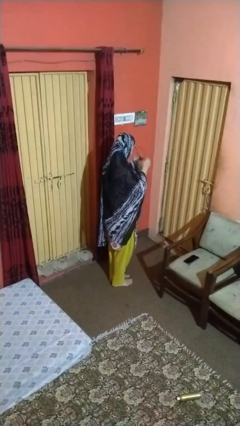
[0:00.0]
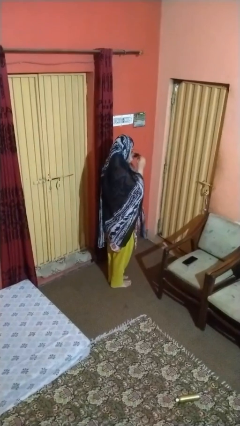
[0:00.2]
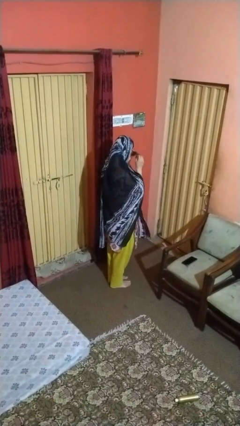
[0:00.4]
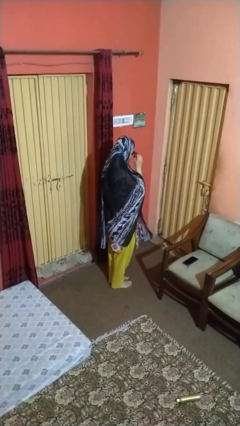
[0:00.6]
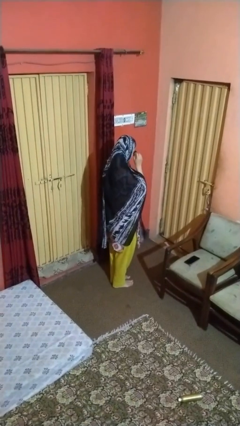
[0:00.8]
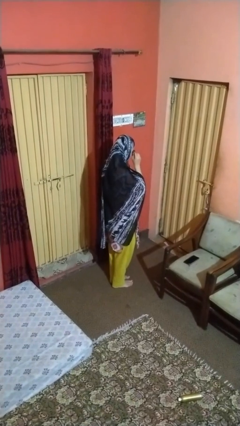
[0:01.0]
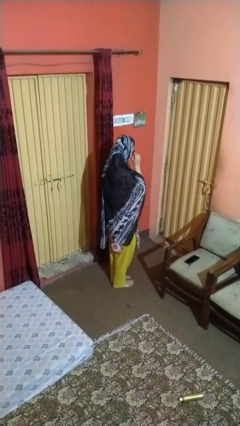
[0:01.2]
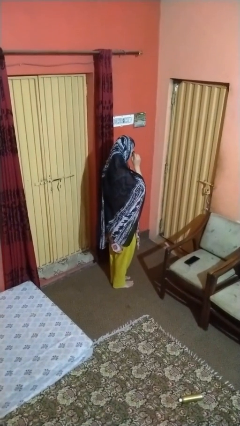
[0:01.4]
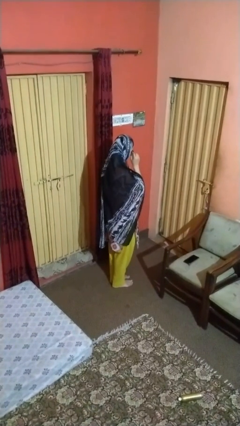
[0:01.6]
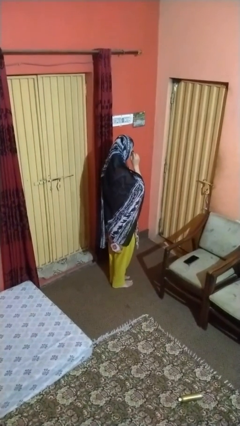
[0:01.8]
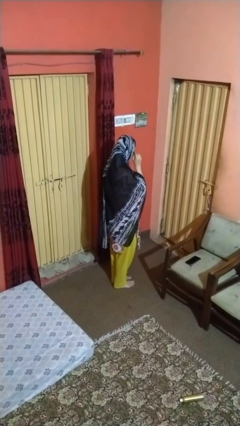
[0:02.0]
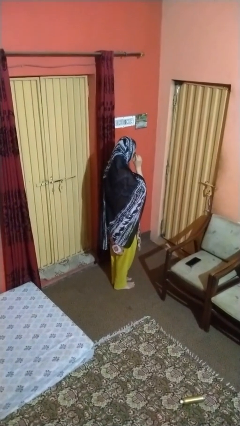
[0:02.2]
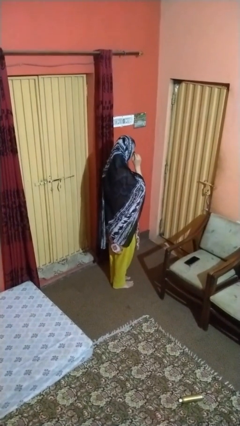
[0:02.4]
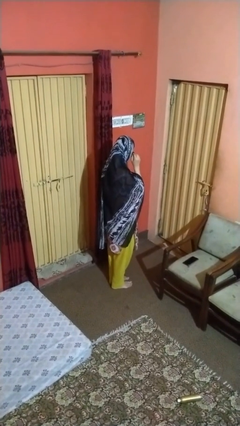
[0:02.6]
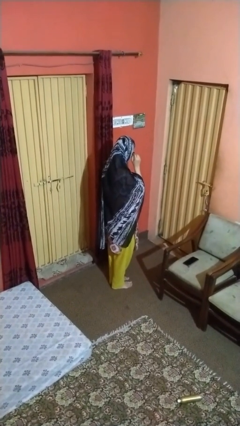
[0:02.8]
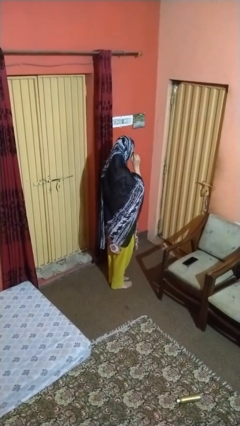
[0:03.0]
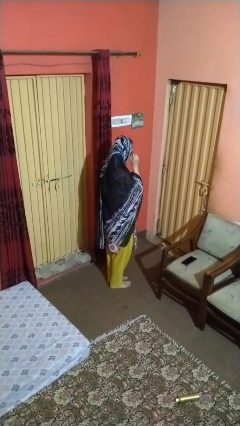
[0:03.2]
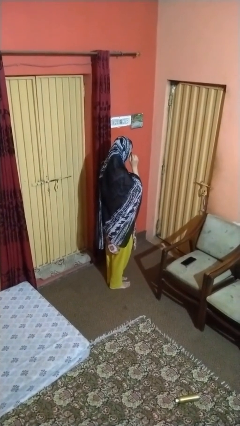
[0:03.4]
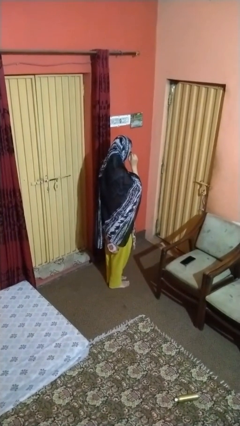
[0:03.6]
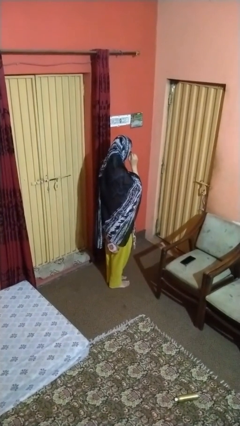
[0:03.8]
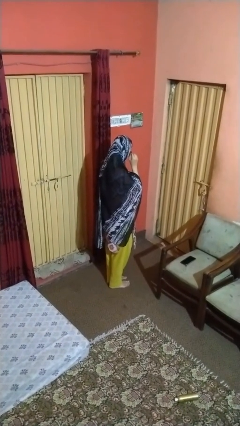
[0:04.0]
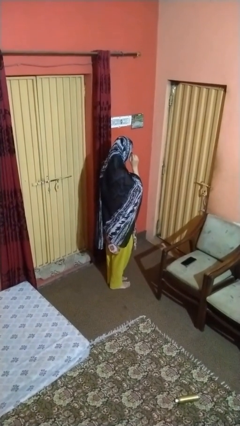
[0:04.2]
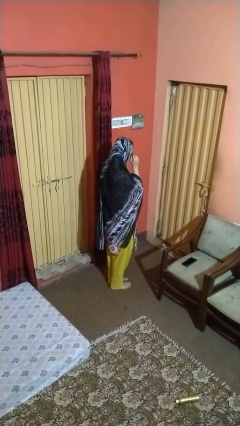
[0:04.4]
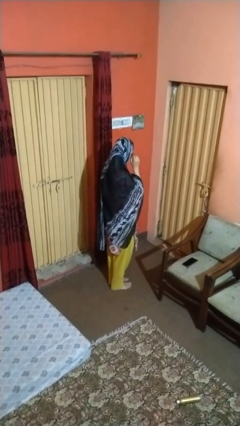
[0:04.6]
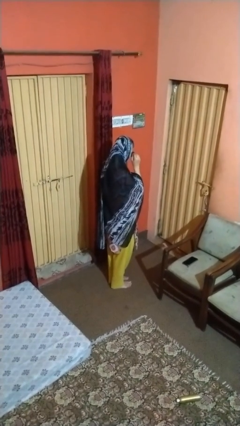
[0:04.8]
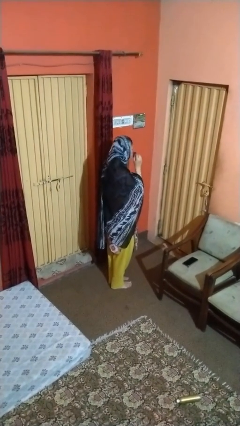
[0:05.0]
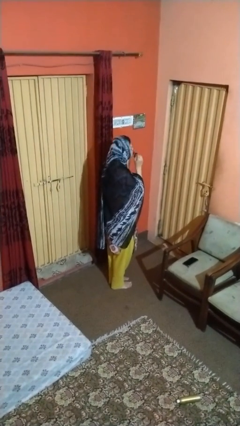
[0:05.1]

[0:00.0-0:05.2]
person puts on sunglasses

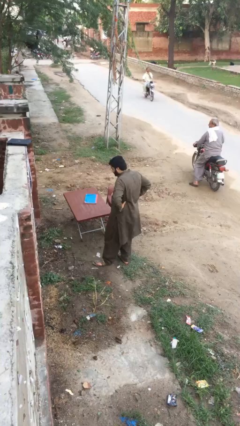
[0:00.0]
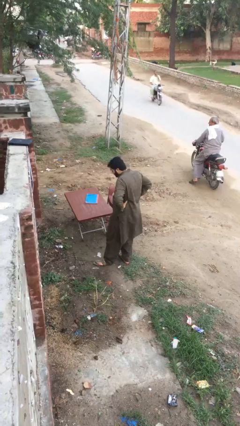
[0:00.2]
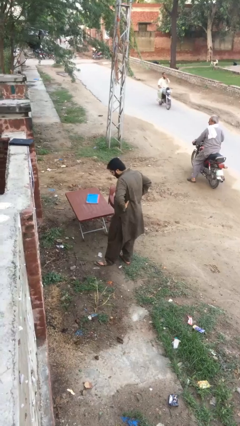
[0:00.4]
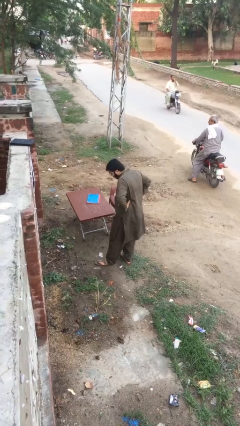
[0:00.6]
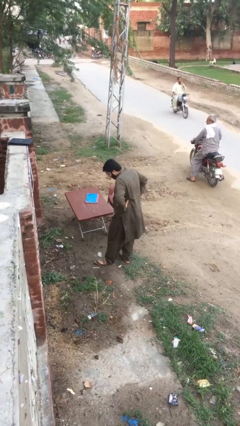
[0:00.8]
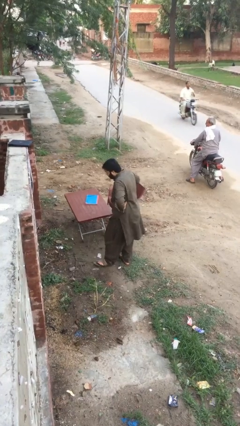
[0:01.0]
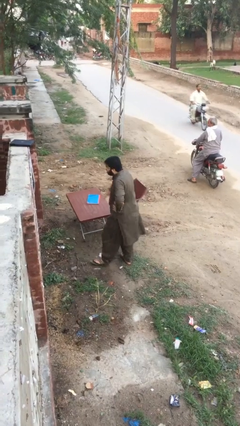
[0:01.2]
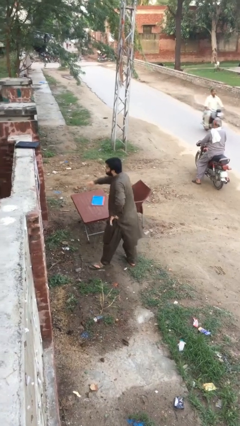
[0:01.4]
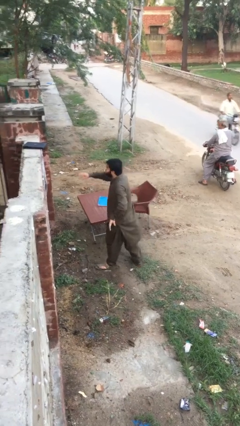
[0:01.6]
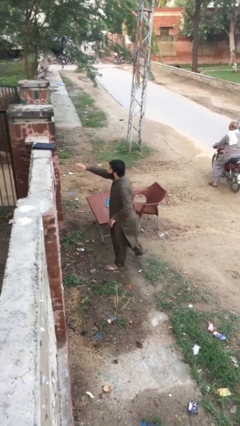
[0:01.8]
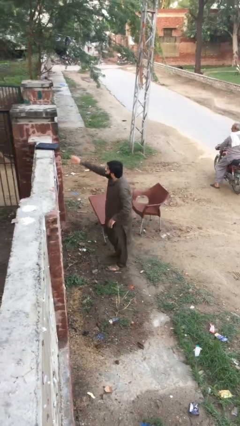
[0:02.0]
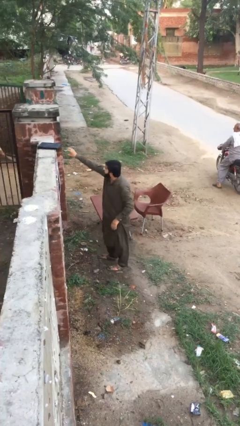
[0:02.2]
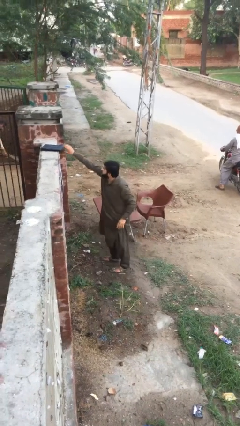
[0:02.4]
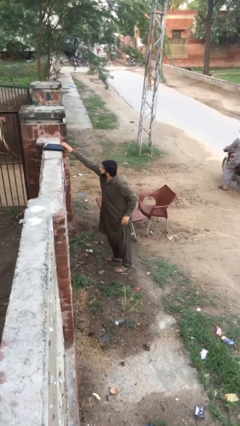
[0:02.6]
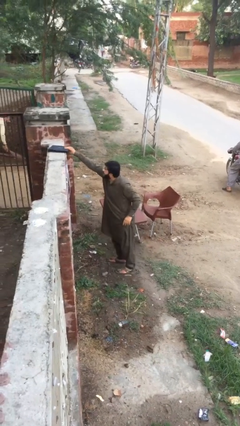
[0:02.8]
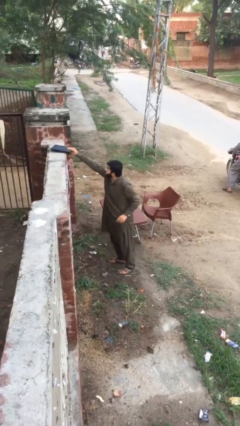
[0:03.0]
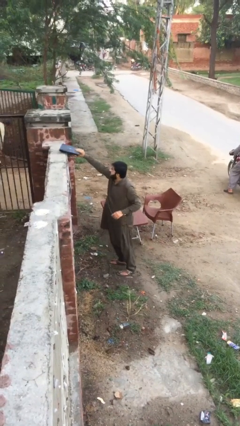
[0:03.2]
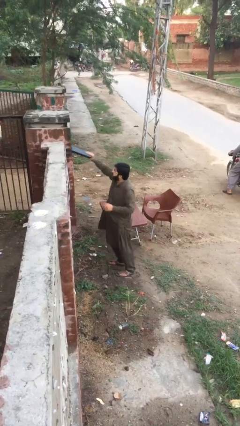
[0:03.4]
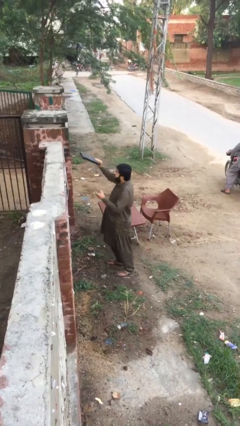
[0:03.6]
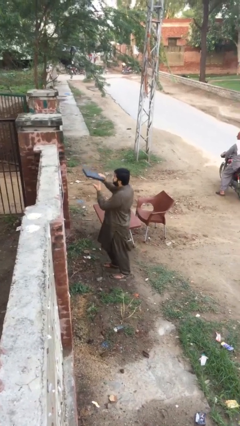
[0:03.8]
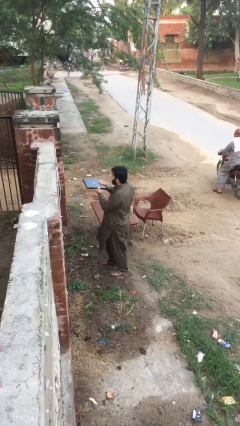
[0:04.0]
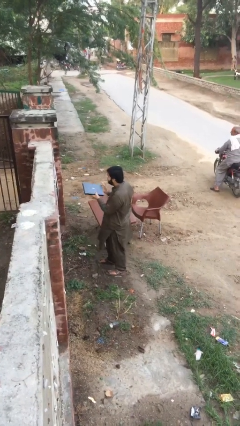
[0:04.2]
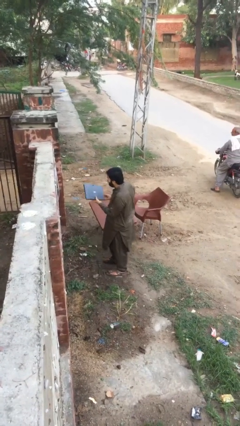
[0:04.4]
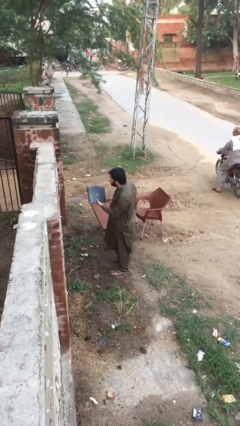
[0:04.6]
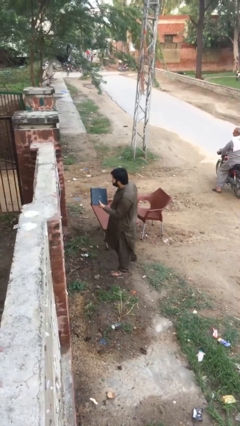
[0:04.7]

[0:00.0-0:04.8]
person picks up object from shelf

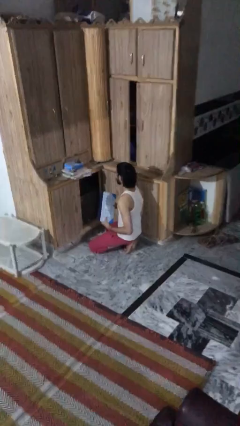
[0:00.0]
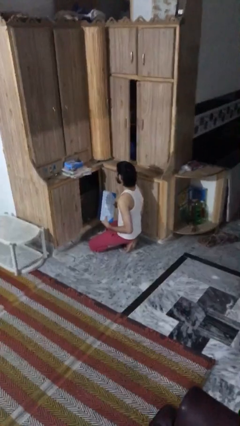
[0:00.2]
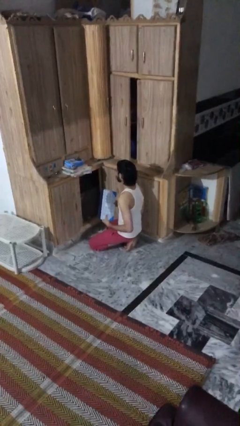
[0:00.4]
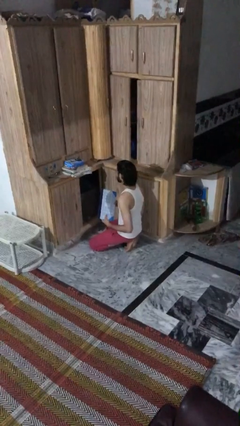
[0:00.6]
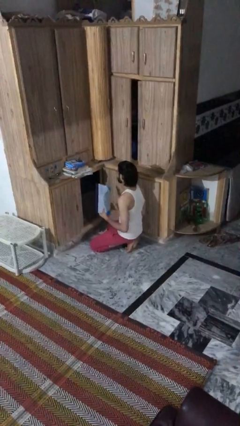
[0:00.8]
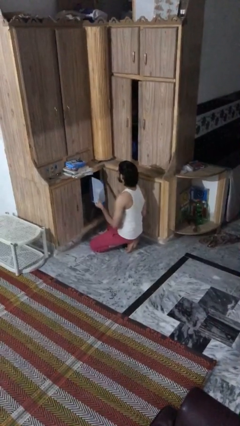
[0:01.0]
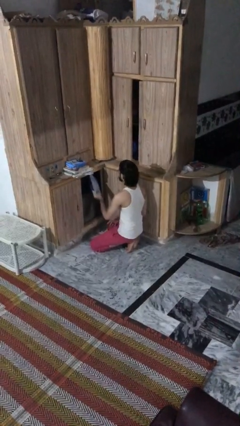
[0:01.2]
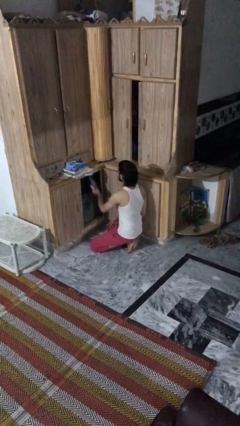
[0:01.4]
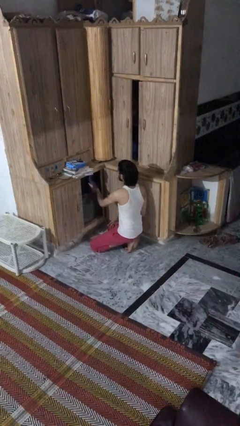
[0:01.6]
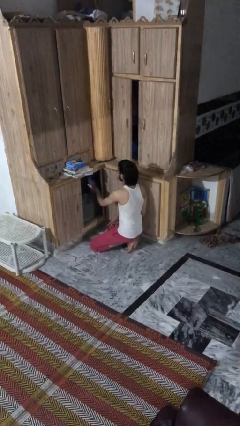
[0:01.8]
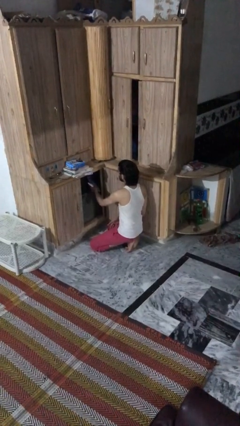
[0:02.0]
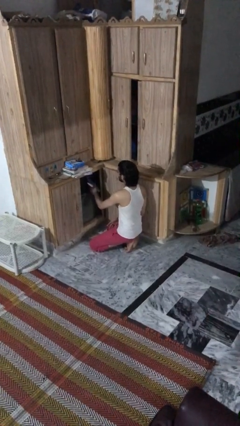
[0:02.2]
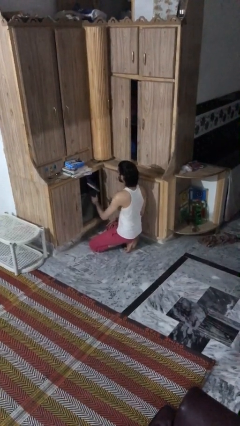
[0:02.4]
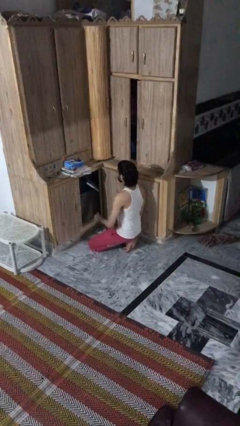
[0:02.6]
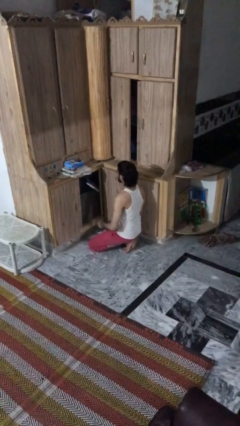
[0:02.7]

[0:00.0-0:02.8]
person puts down object into cabinet

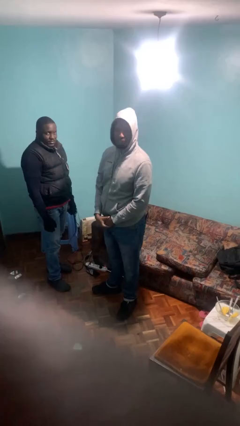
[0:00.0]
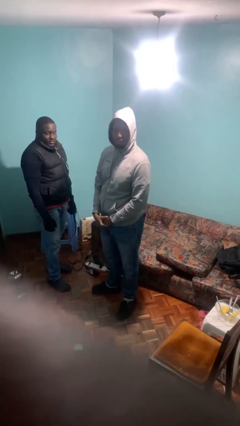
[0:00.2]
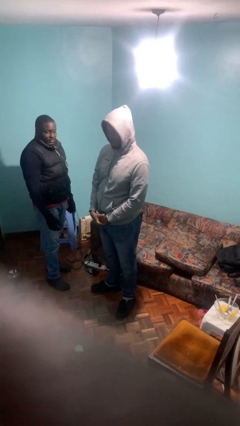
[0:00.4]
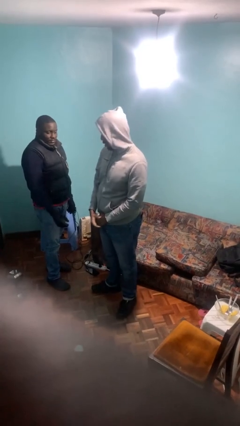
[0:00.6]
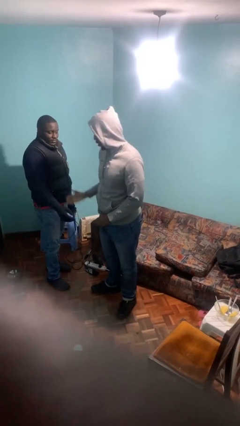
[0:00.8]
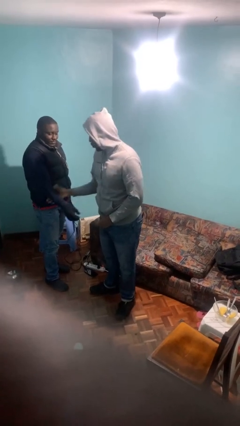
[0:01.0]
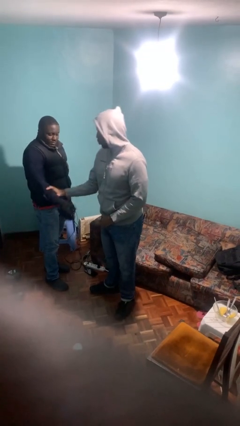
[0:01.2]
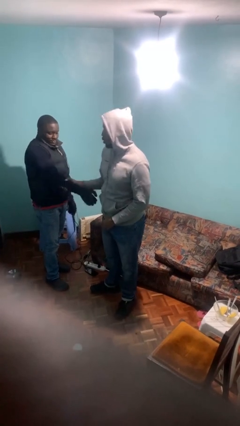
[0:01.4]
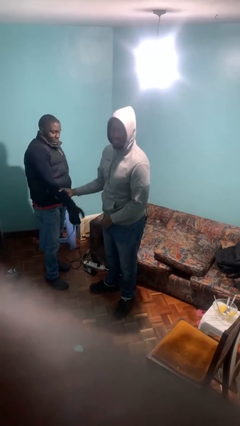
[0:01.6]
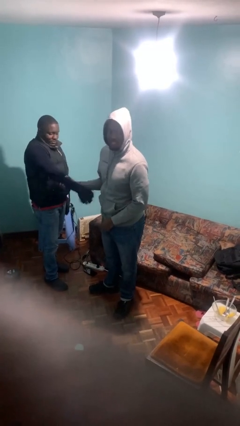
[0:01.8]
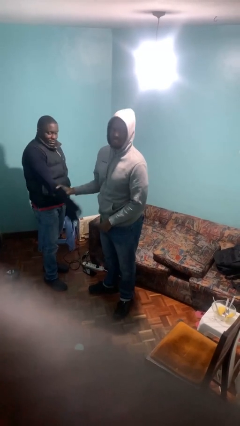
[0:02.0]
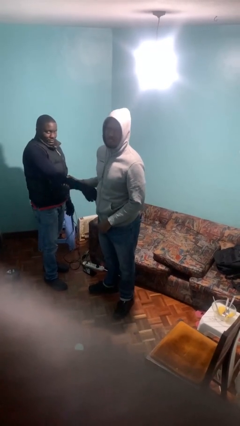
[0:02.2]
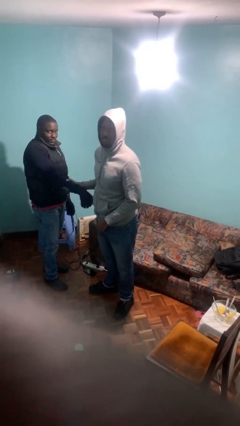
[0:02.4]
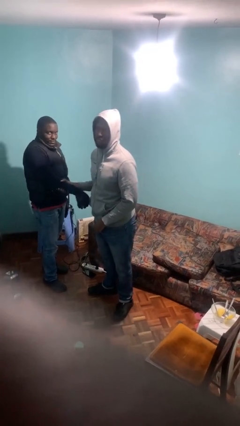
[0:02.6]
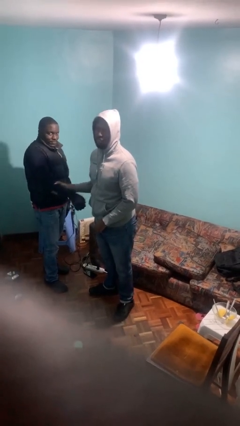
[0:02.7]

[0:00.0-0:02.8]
person grabs person by forearm

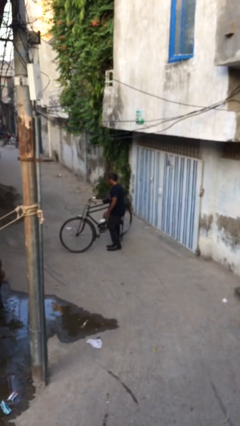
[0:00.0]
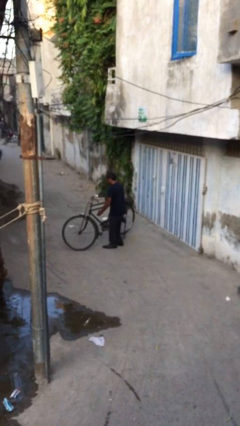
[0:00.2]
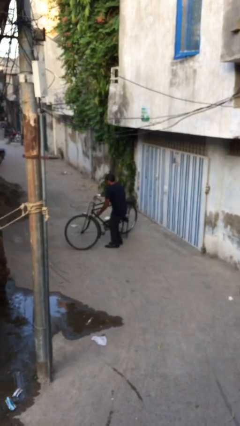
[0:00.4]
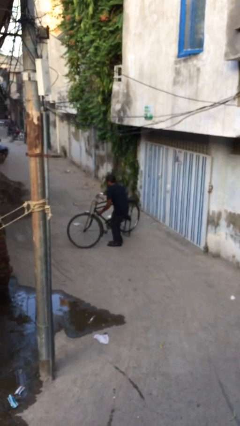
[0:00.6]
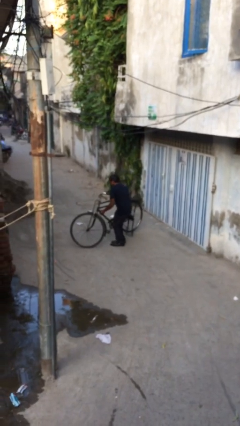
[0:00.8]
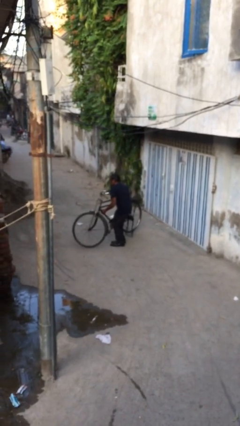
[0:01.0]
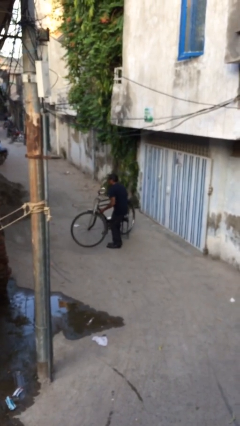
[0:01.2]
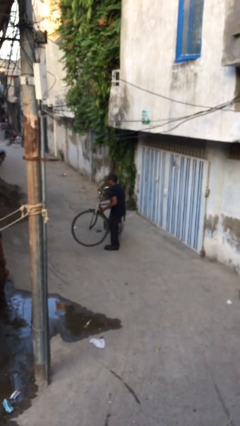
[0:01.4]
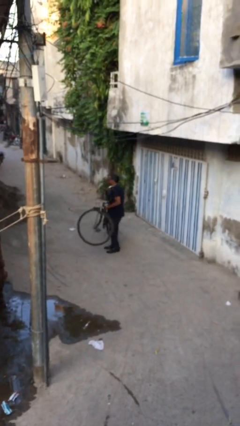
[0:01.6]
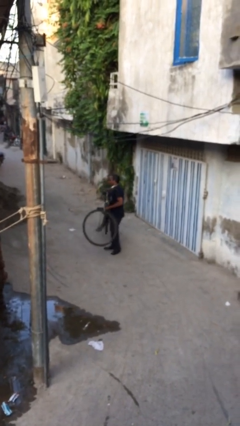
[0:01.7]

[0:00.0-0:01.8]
person picks up object from floor

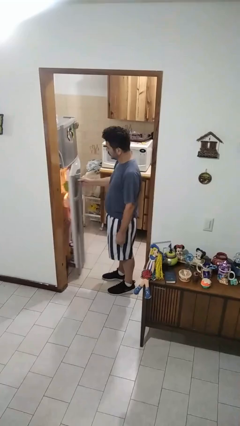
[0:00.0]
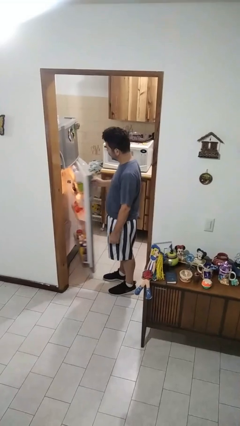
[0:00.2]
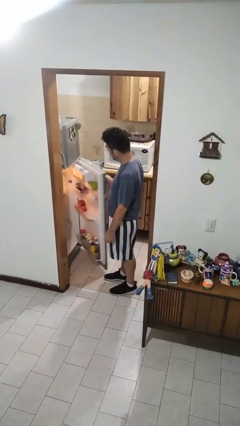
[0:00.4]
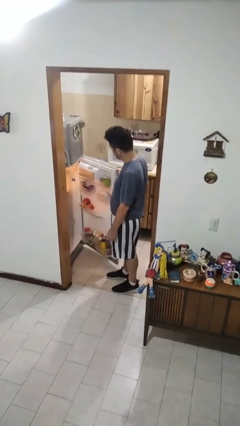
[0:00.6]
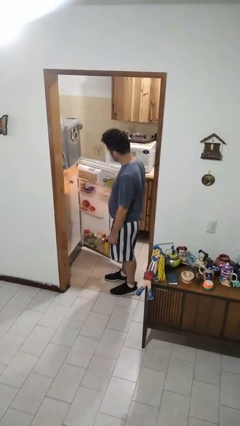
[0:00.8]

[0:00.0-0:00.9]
person opens refrigerator
